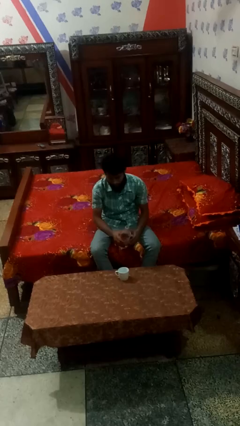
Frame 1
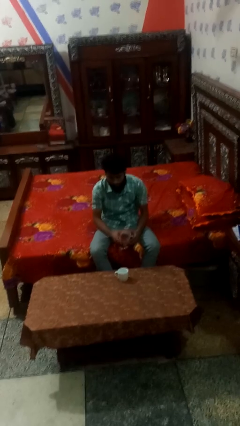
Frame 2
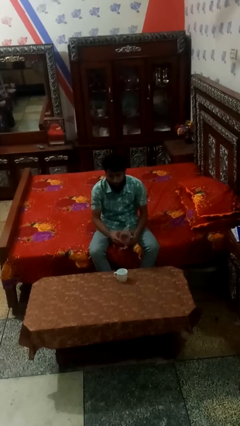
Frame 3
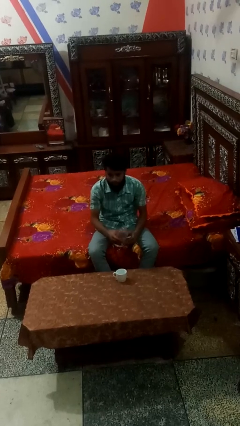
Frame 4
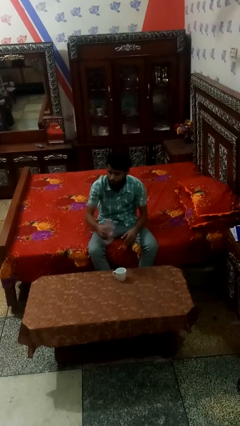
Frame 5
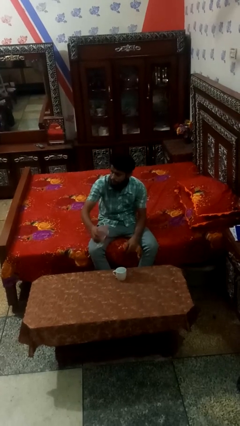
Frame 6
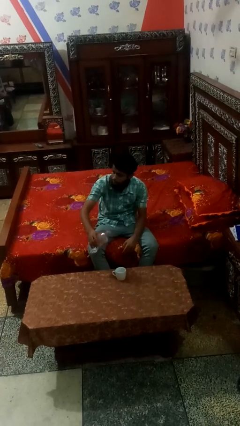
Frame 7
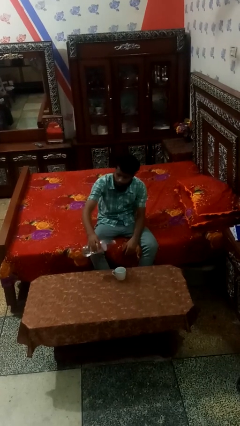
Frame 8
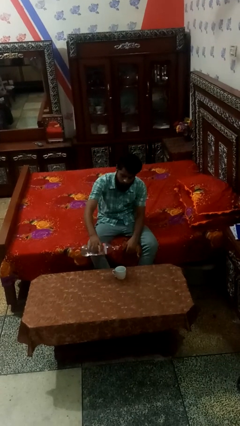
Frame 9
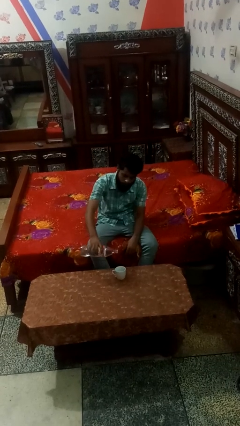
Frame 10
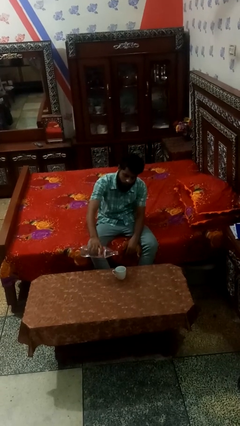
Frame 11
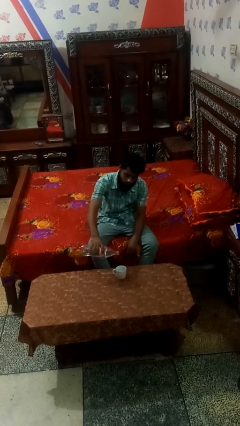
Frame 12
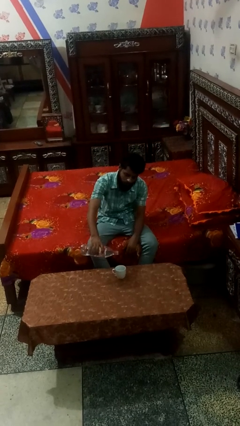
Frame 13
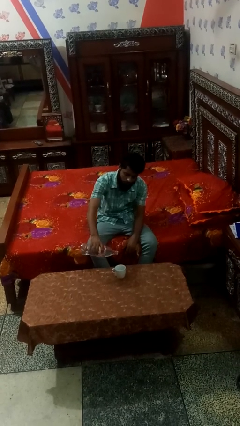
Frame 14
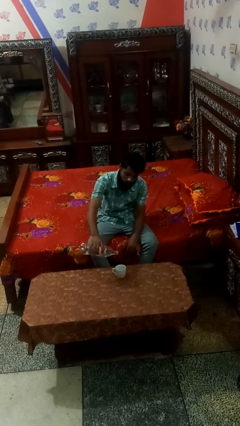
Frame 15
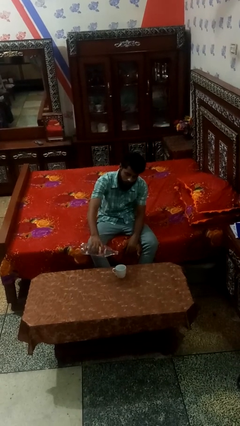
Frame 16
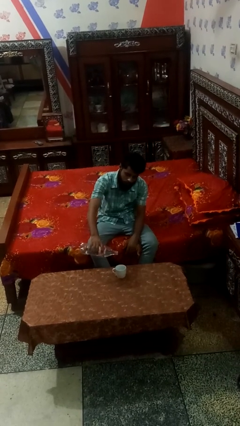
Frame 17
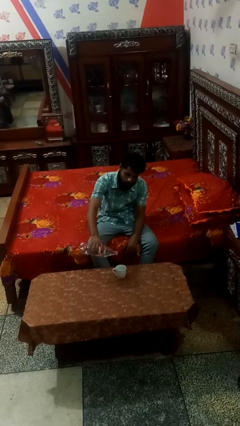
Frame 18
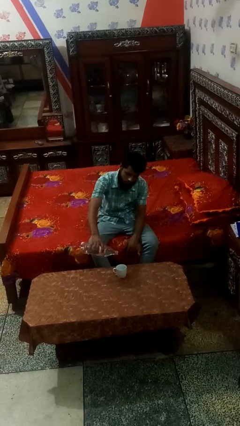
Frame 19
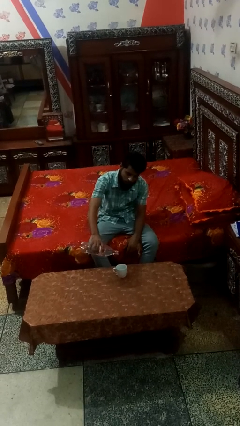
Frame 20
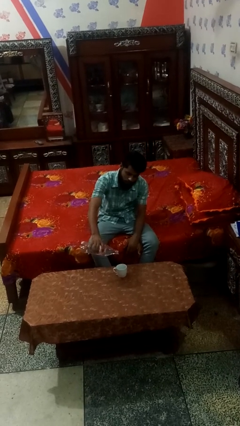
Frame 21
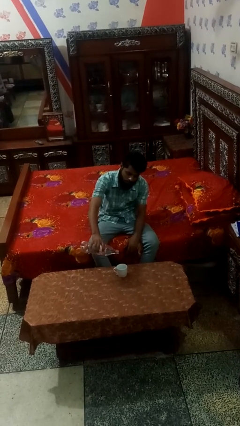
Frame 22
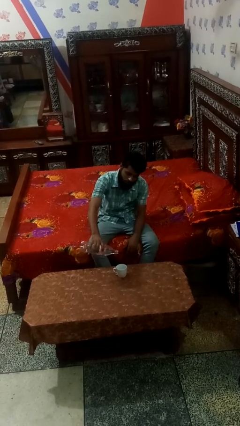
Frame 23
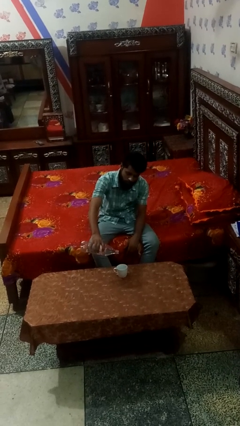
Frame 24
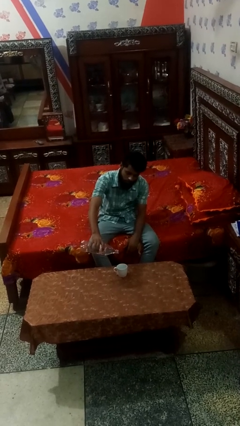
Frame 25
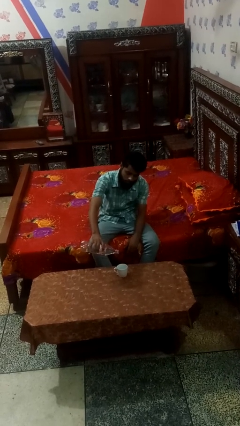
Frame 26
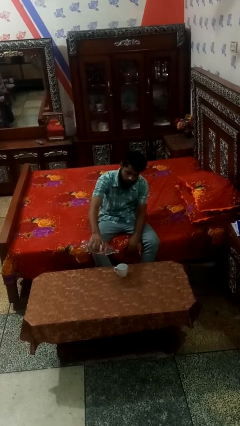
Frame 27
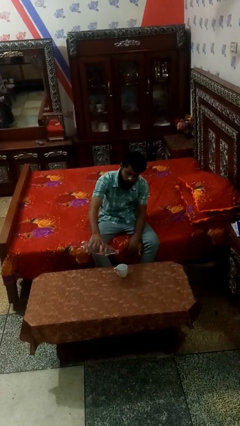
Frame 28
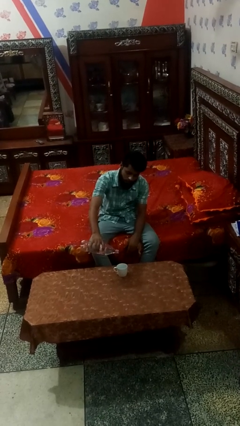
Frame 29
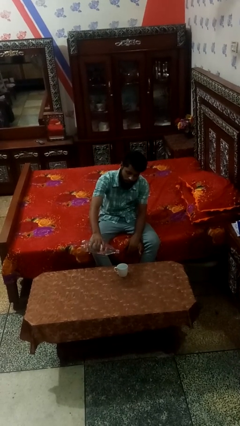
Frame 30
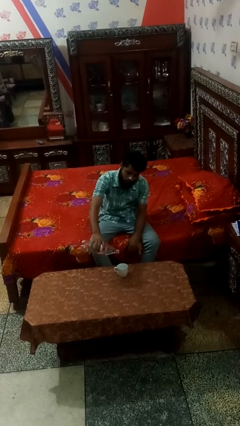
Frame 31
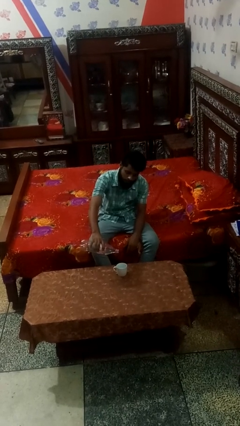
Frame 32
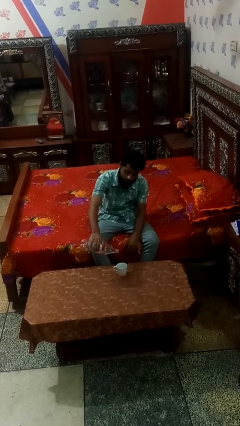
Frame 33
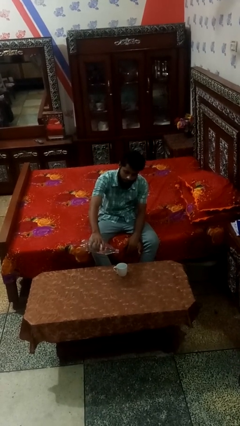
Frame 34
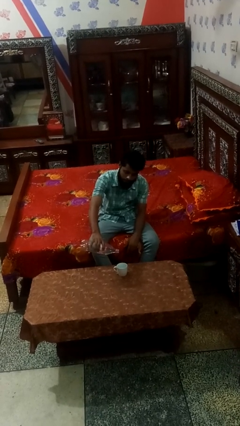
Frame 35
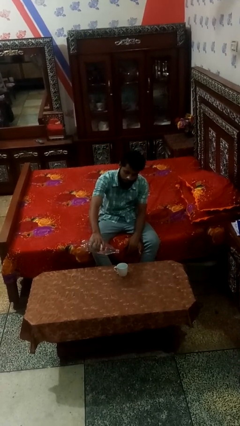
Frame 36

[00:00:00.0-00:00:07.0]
person pours liquid into cup

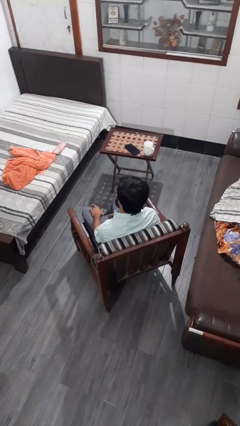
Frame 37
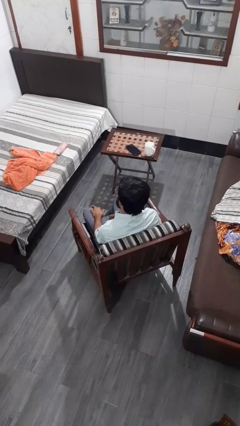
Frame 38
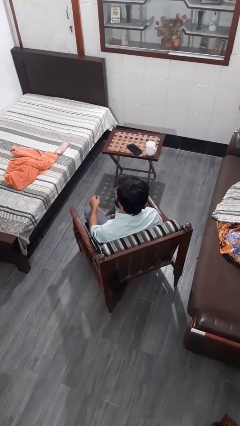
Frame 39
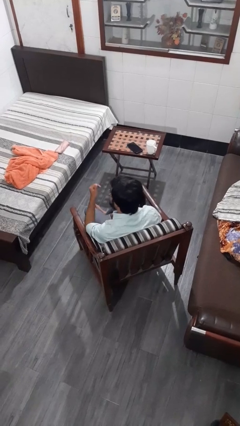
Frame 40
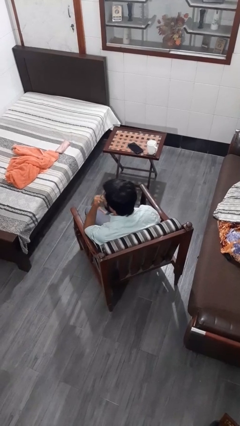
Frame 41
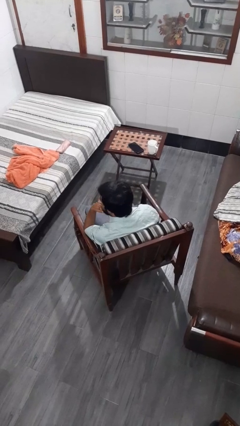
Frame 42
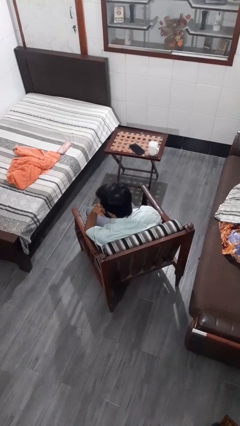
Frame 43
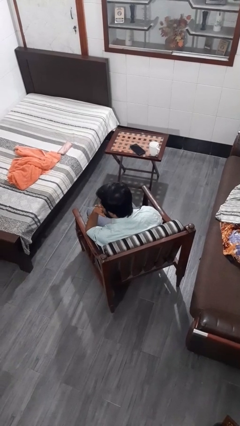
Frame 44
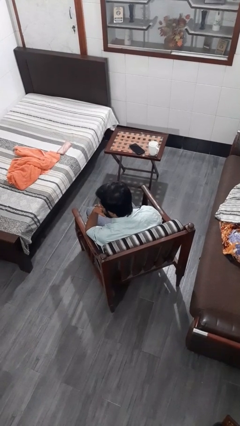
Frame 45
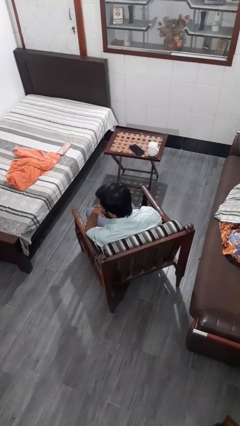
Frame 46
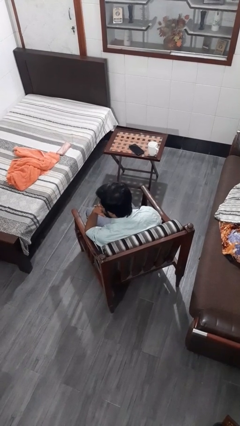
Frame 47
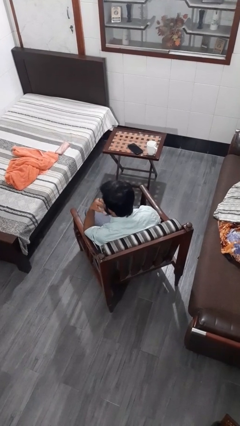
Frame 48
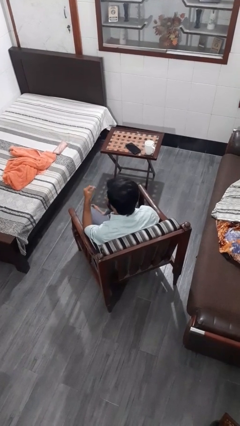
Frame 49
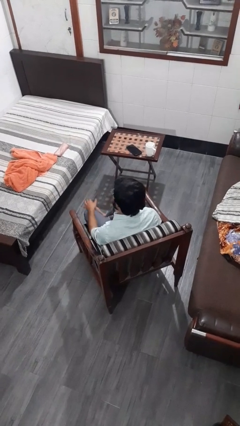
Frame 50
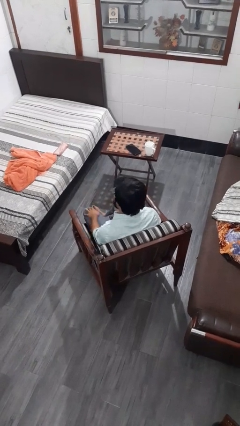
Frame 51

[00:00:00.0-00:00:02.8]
person strokes chin

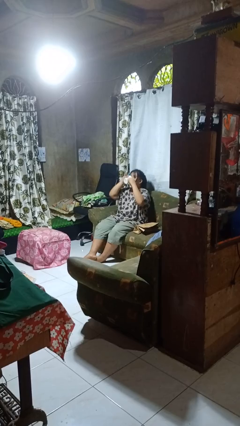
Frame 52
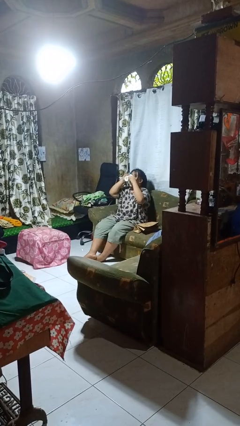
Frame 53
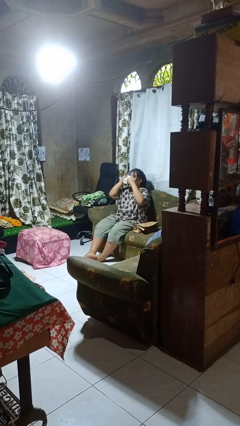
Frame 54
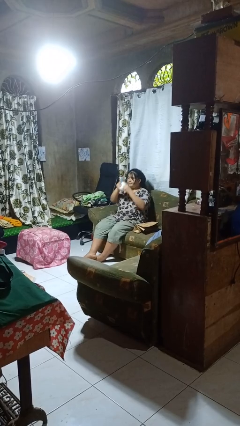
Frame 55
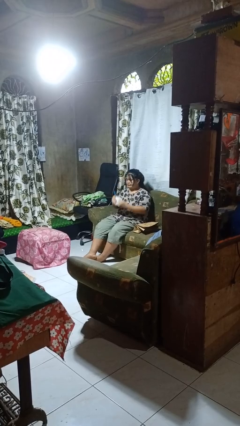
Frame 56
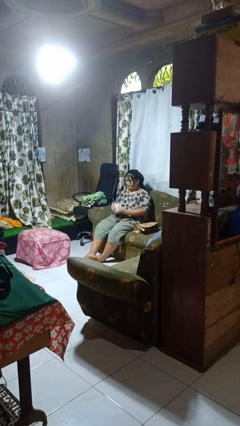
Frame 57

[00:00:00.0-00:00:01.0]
person drinks from mug

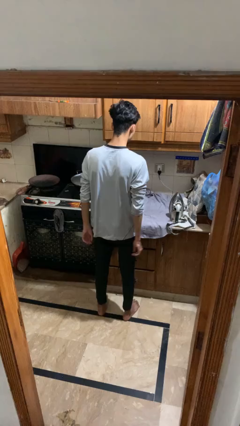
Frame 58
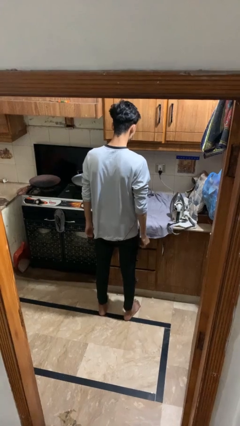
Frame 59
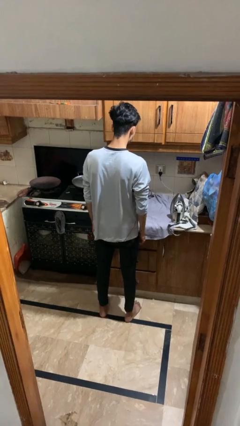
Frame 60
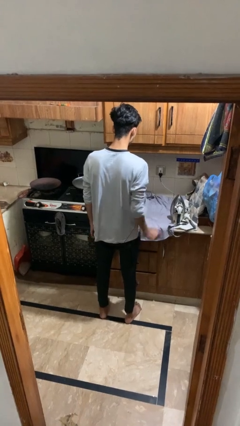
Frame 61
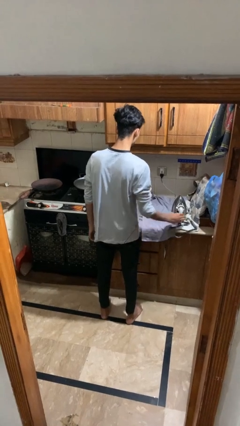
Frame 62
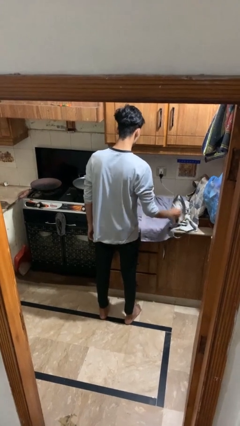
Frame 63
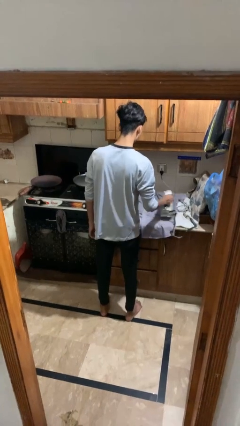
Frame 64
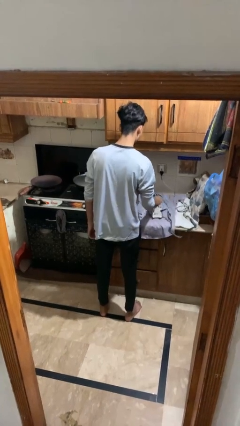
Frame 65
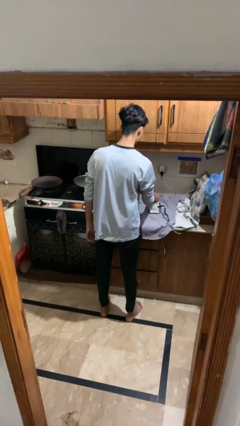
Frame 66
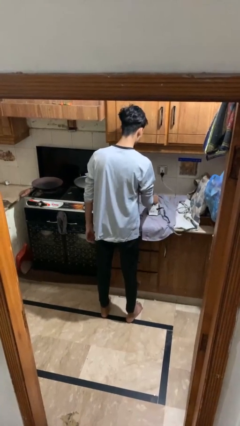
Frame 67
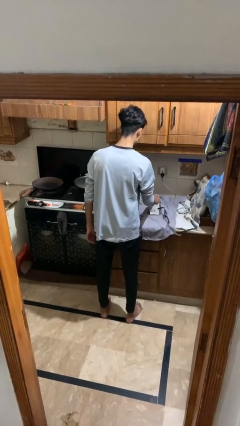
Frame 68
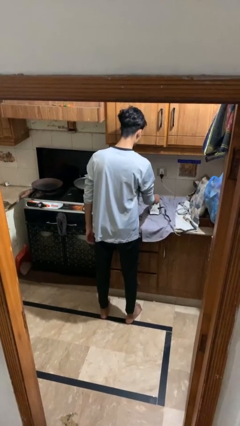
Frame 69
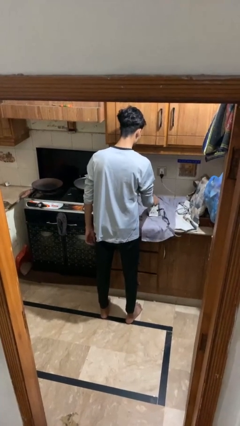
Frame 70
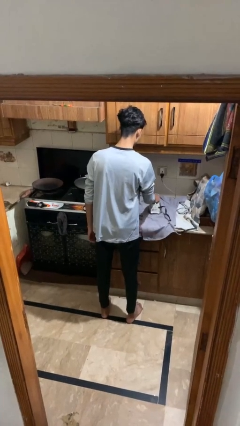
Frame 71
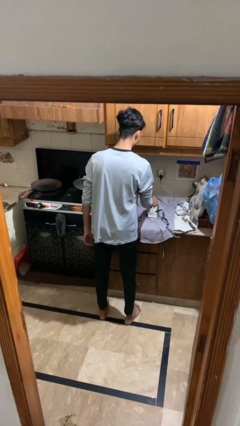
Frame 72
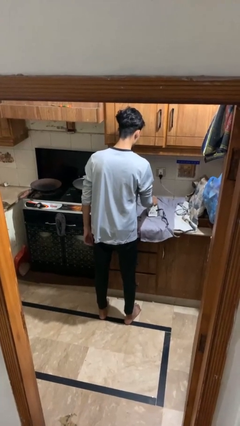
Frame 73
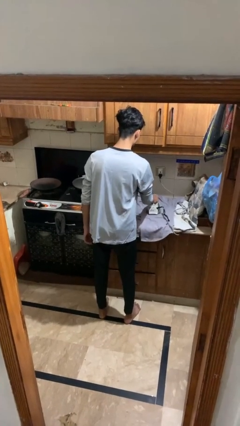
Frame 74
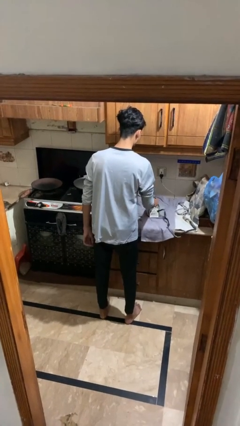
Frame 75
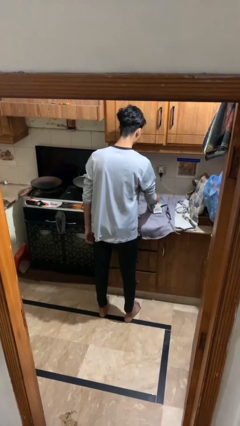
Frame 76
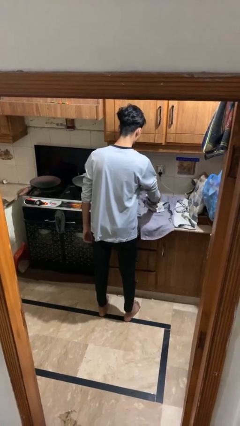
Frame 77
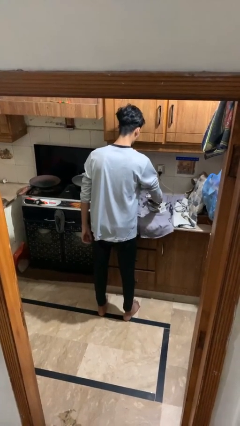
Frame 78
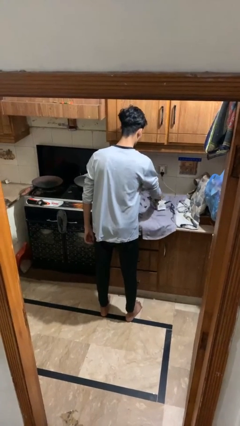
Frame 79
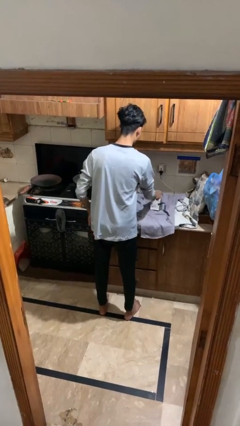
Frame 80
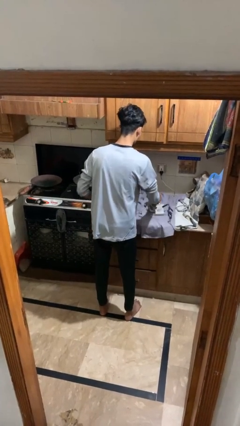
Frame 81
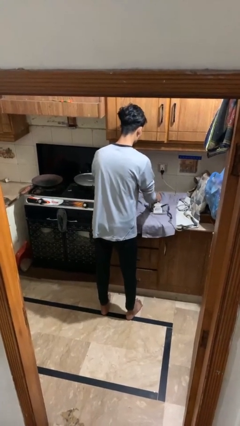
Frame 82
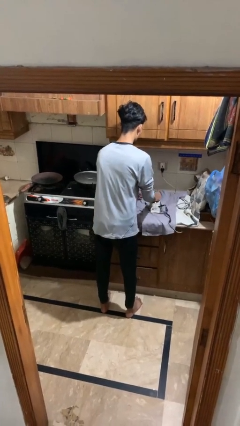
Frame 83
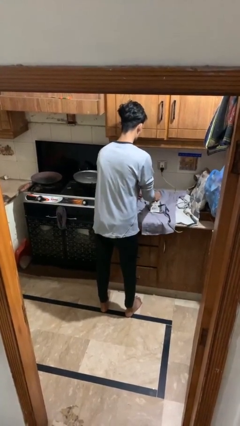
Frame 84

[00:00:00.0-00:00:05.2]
person irons clothes

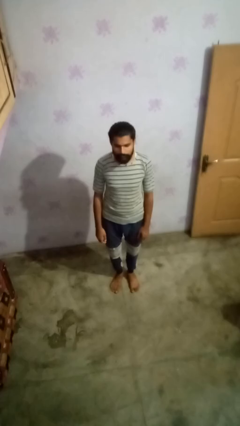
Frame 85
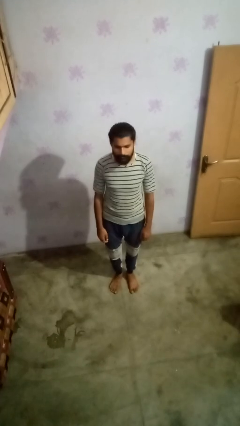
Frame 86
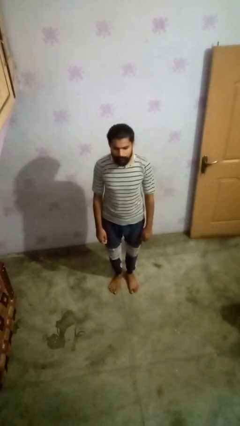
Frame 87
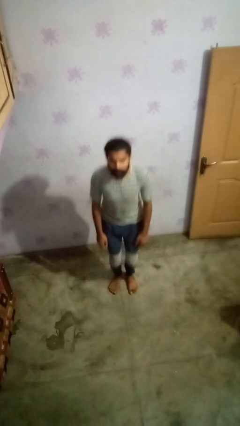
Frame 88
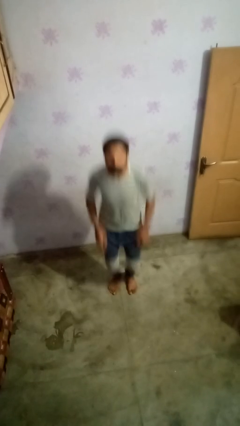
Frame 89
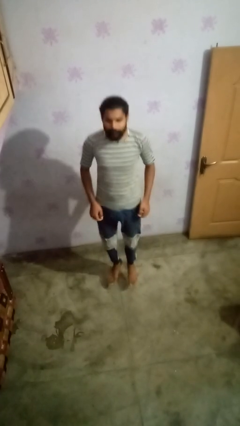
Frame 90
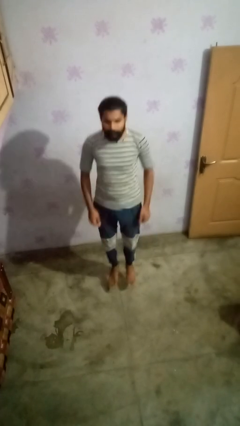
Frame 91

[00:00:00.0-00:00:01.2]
person jumps

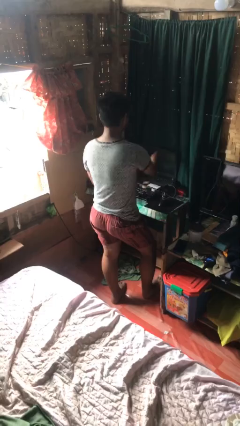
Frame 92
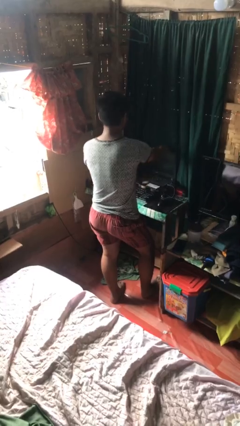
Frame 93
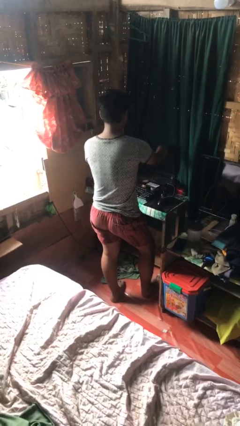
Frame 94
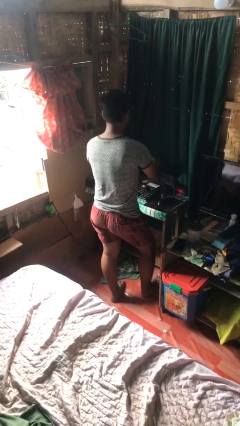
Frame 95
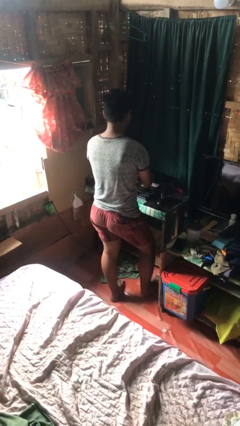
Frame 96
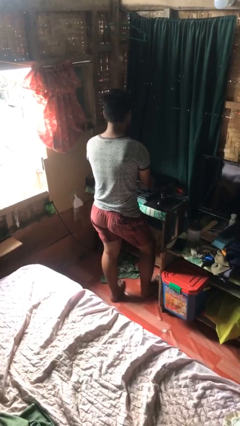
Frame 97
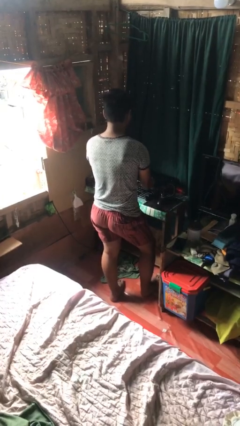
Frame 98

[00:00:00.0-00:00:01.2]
person closes laptop
